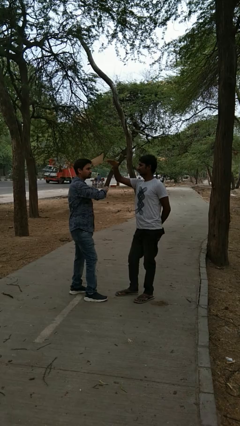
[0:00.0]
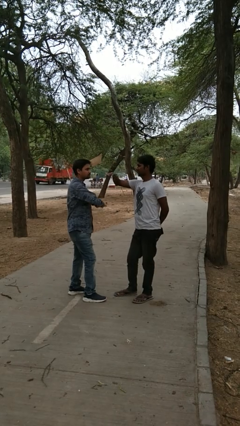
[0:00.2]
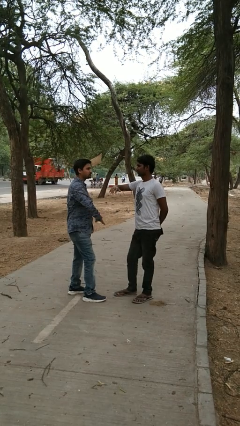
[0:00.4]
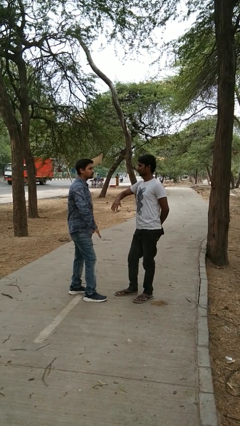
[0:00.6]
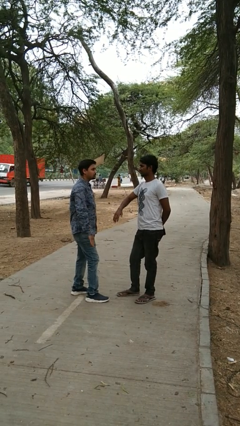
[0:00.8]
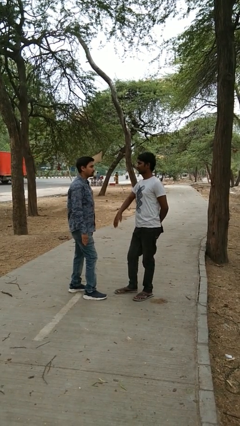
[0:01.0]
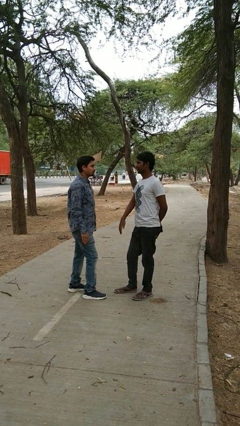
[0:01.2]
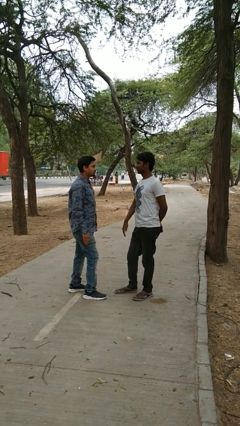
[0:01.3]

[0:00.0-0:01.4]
person highfives hand

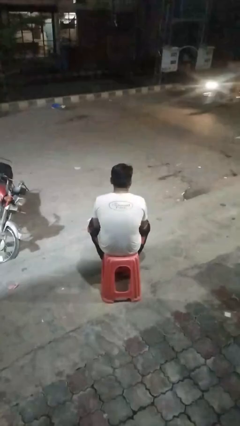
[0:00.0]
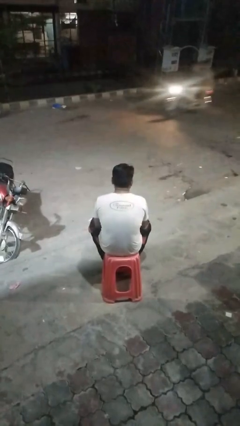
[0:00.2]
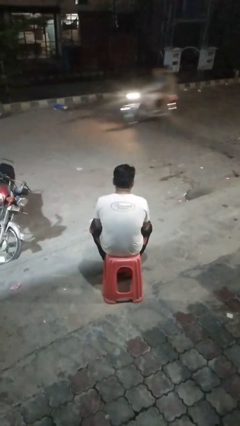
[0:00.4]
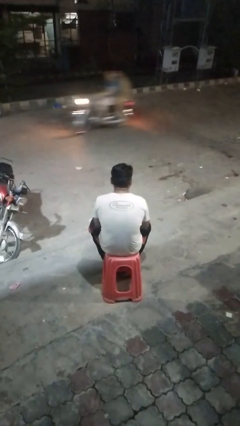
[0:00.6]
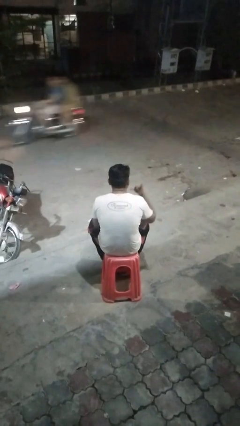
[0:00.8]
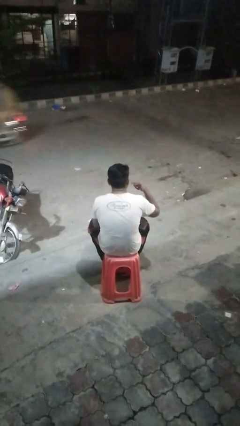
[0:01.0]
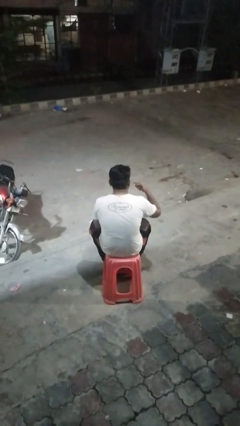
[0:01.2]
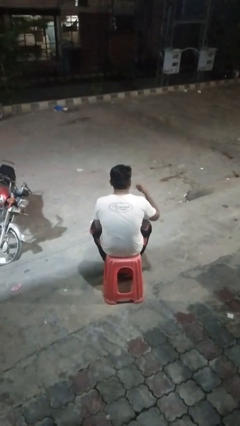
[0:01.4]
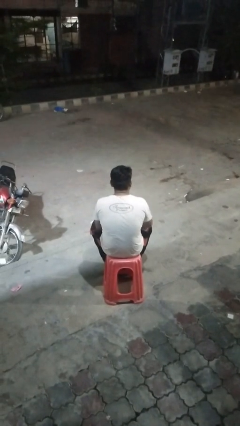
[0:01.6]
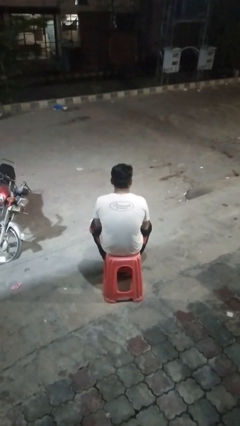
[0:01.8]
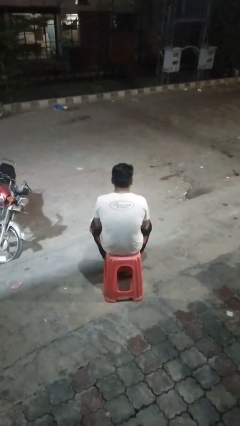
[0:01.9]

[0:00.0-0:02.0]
person gestures call me

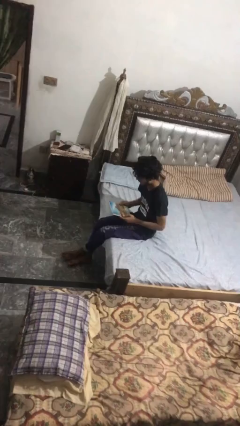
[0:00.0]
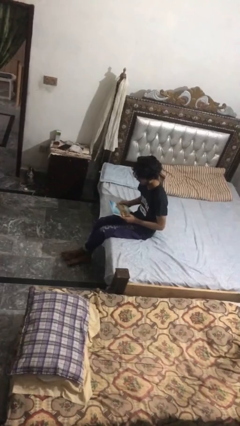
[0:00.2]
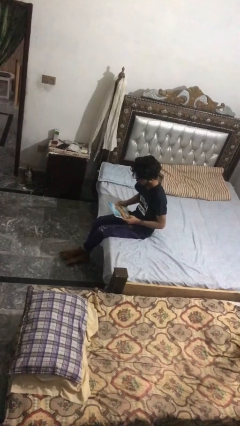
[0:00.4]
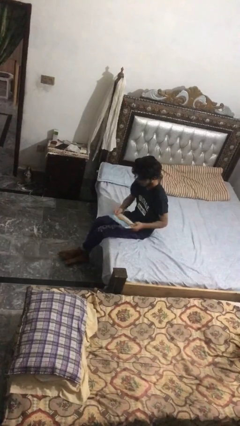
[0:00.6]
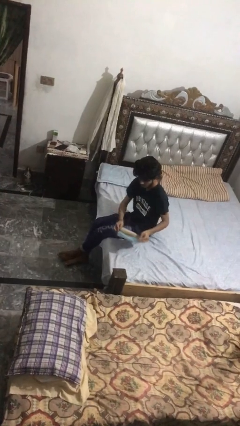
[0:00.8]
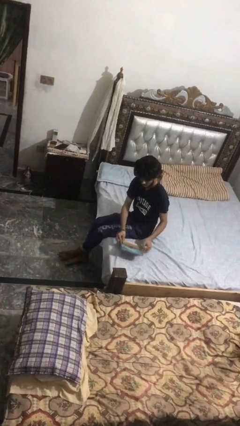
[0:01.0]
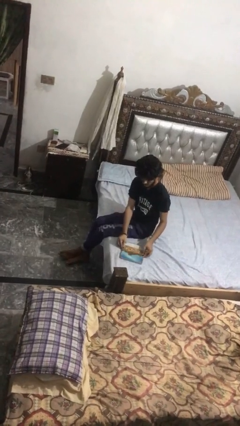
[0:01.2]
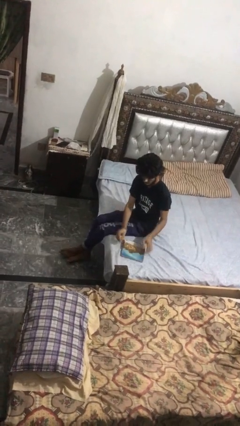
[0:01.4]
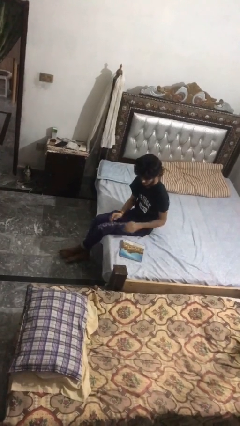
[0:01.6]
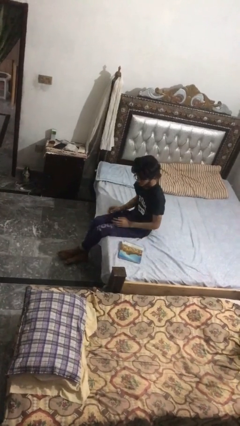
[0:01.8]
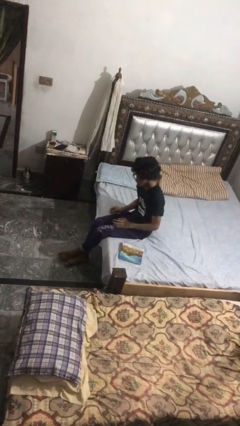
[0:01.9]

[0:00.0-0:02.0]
person puts down object on bed

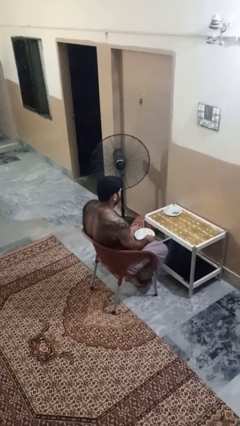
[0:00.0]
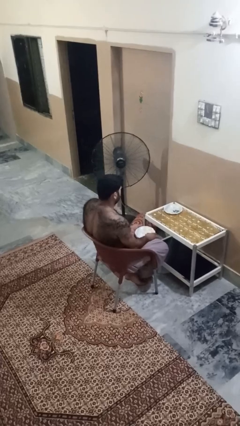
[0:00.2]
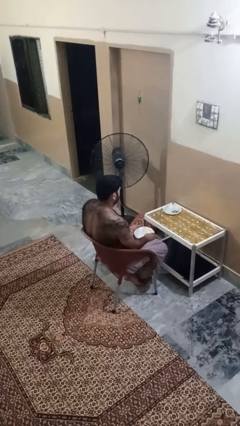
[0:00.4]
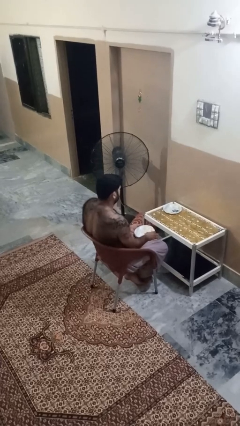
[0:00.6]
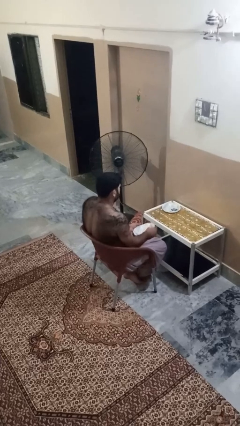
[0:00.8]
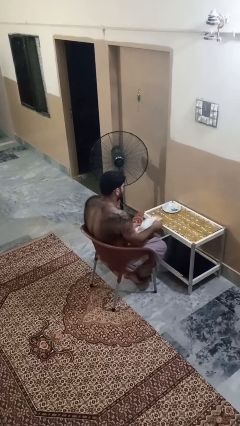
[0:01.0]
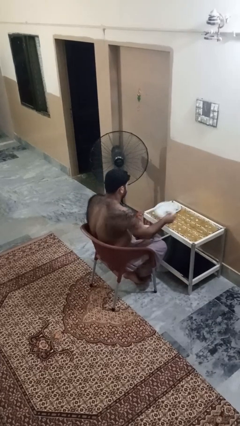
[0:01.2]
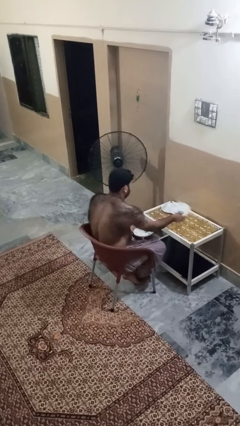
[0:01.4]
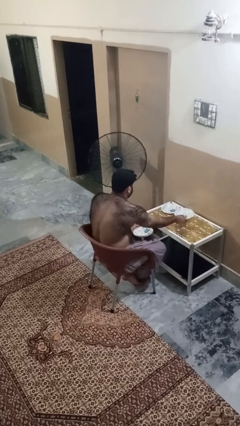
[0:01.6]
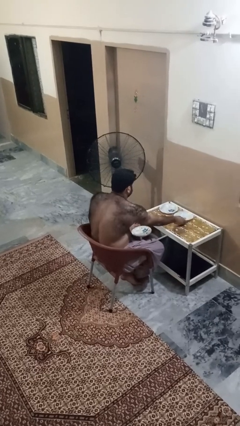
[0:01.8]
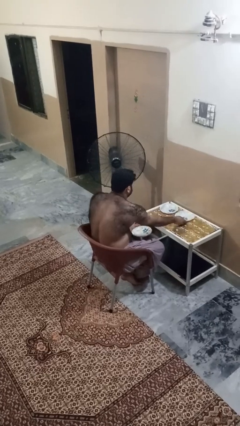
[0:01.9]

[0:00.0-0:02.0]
person sets table

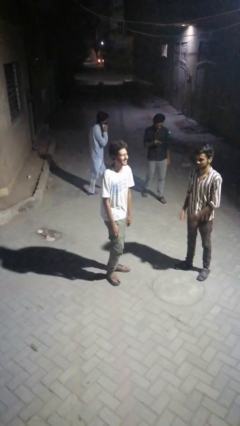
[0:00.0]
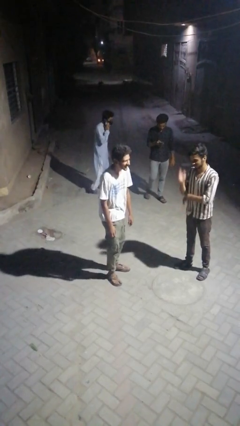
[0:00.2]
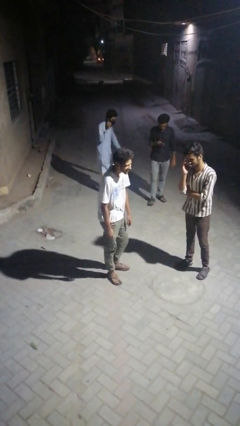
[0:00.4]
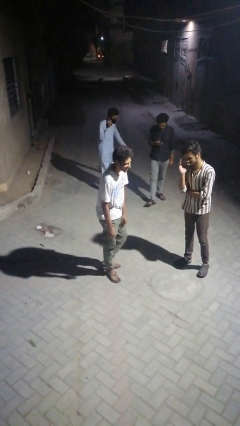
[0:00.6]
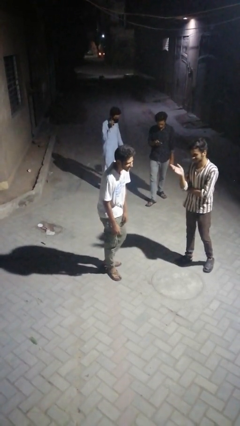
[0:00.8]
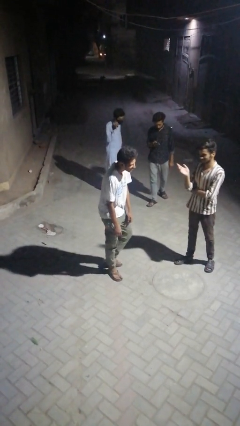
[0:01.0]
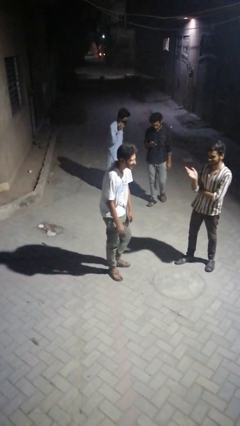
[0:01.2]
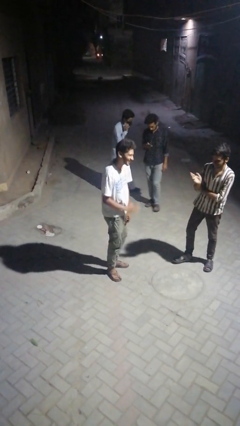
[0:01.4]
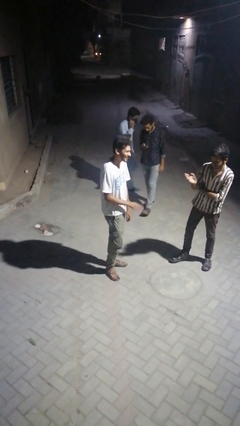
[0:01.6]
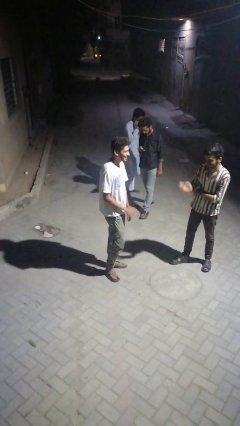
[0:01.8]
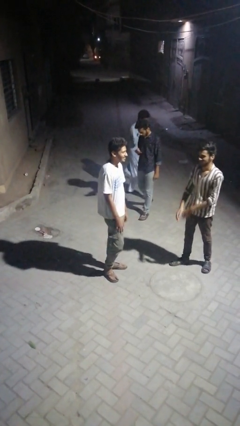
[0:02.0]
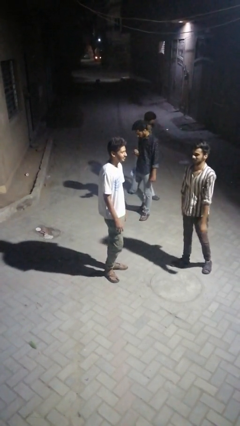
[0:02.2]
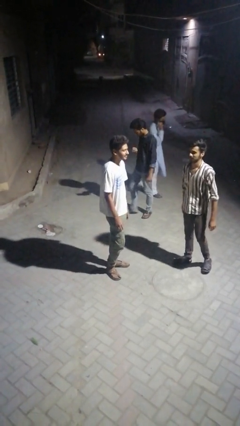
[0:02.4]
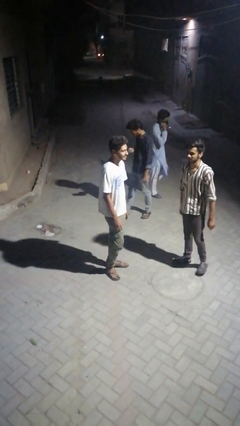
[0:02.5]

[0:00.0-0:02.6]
person laughs with person

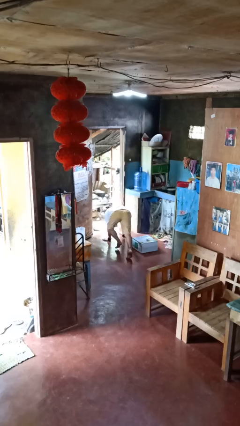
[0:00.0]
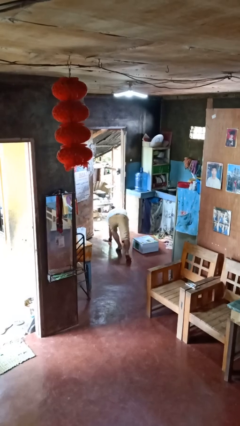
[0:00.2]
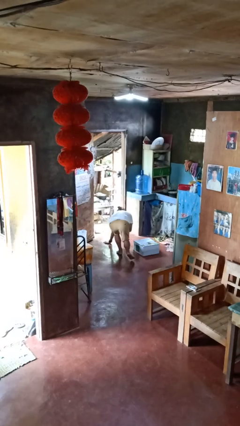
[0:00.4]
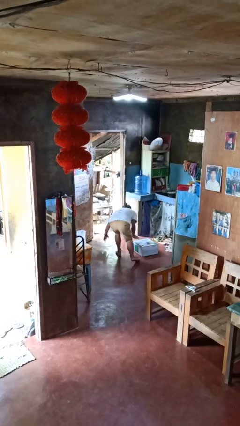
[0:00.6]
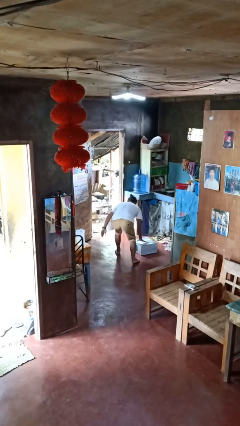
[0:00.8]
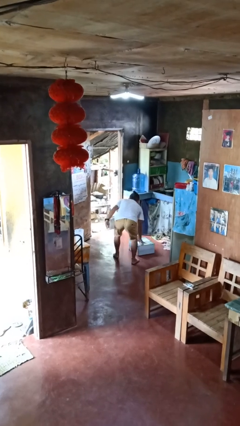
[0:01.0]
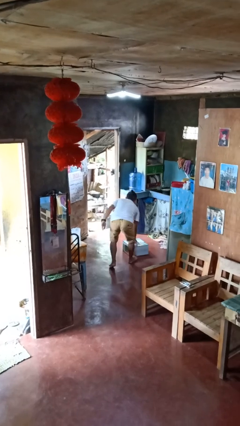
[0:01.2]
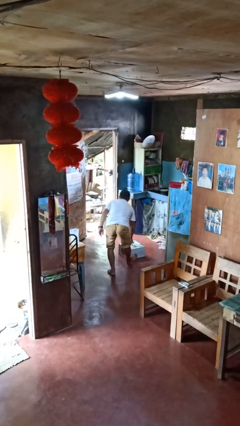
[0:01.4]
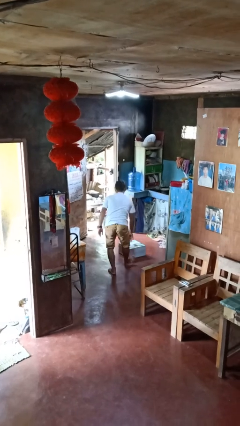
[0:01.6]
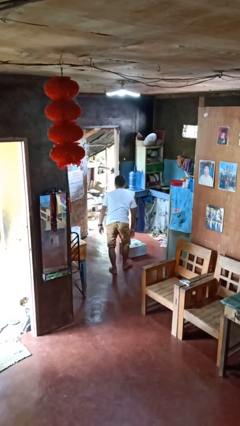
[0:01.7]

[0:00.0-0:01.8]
person stands up from floor

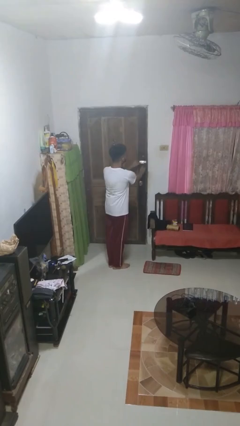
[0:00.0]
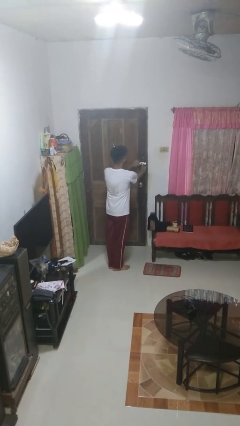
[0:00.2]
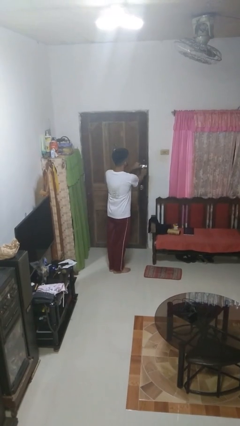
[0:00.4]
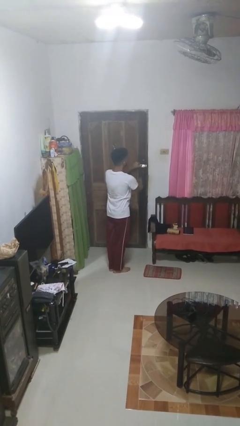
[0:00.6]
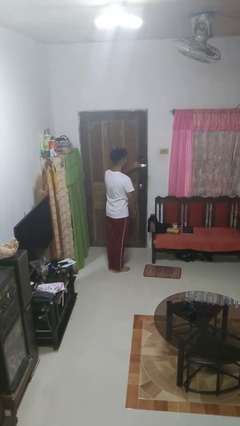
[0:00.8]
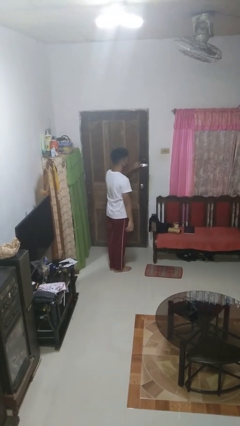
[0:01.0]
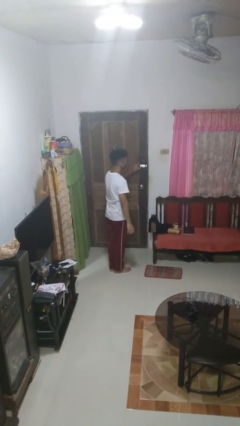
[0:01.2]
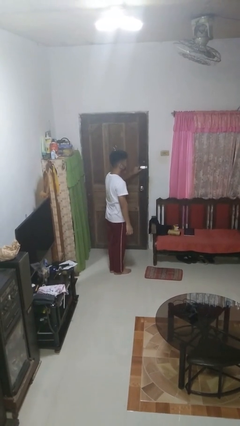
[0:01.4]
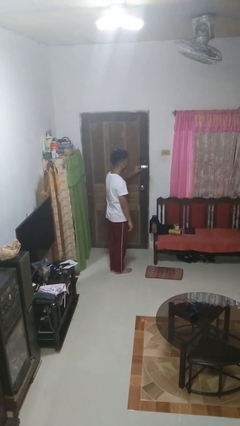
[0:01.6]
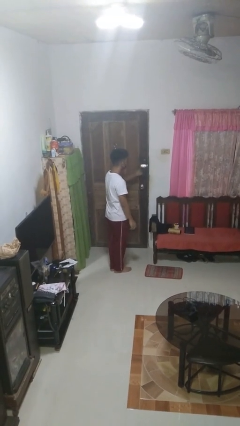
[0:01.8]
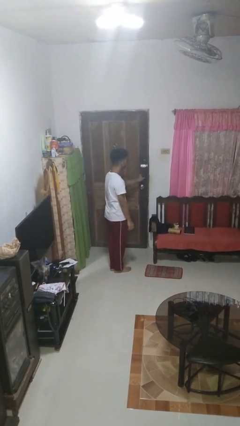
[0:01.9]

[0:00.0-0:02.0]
person unlocks door with keys

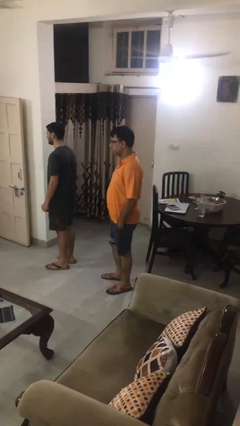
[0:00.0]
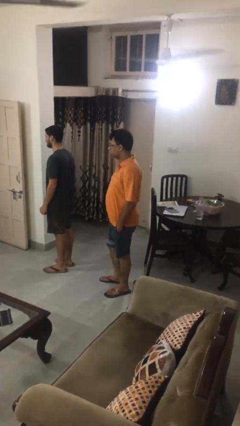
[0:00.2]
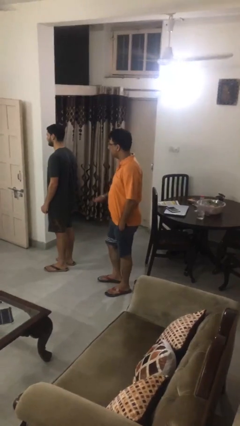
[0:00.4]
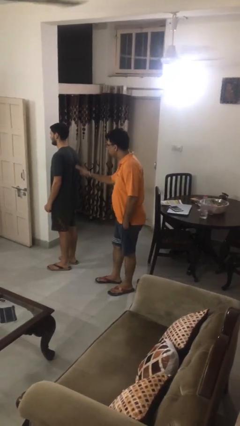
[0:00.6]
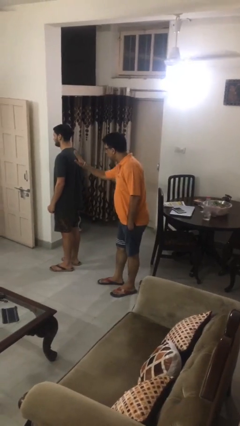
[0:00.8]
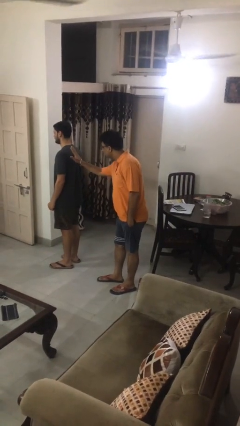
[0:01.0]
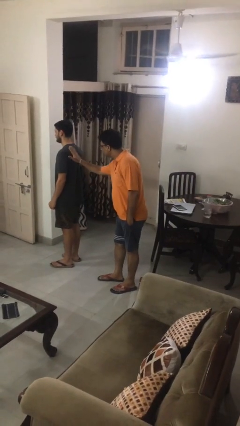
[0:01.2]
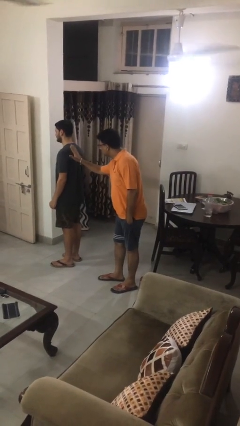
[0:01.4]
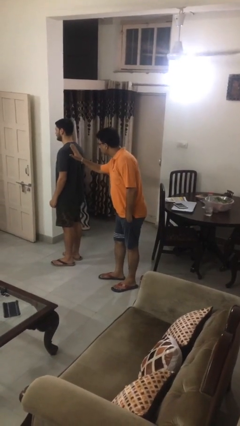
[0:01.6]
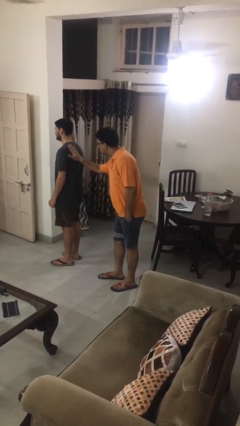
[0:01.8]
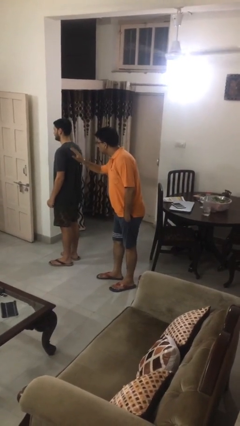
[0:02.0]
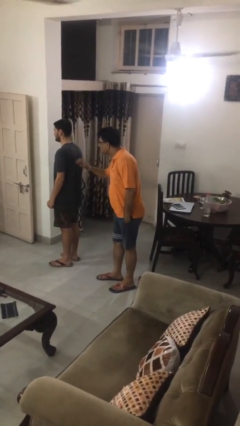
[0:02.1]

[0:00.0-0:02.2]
person touches back of person

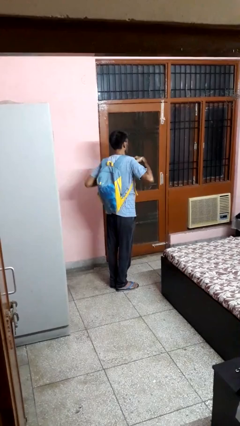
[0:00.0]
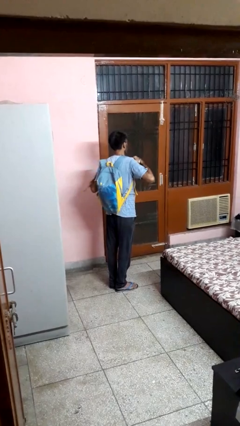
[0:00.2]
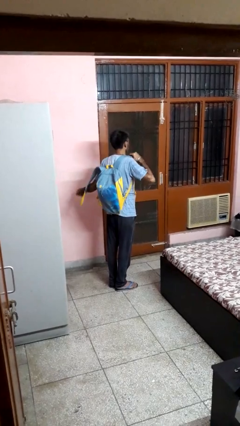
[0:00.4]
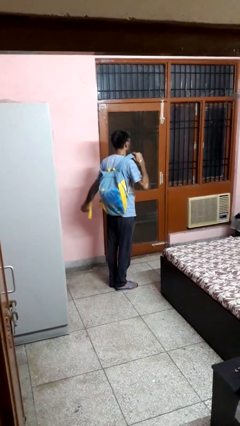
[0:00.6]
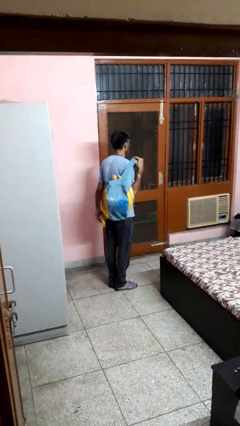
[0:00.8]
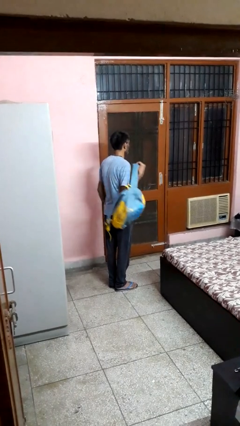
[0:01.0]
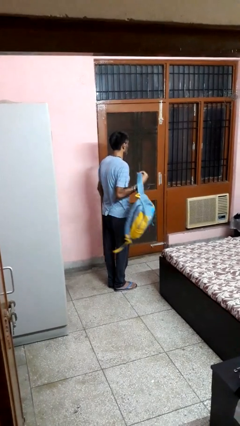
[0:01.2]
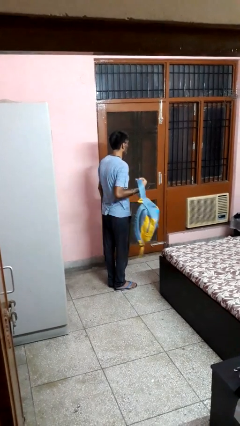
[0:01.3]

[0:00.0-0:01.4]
person takes off backpack
